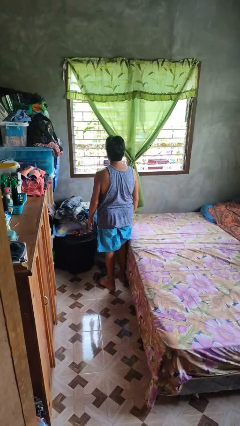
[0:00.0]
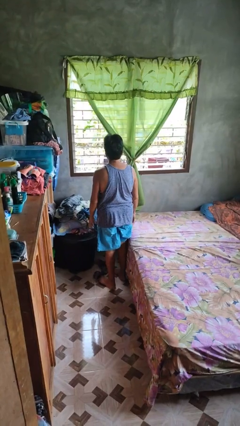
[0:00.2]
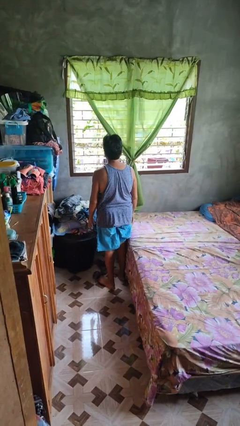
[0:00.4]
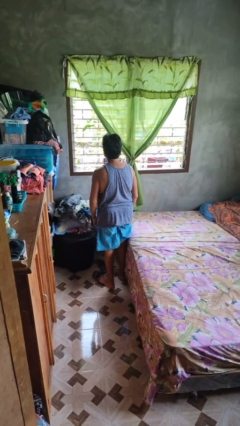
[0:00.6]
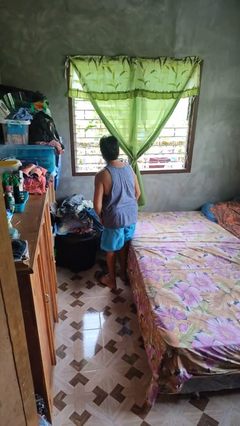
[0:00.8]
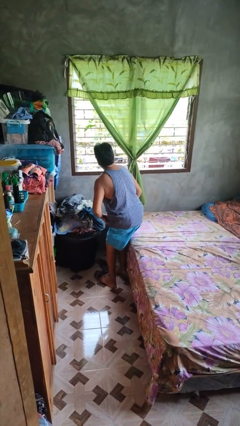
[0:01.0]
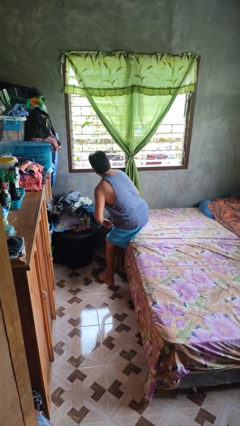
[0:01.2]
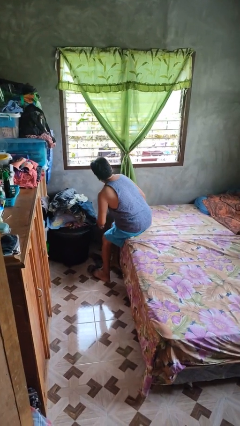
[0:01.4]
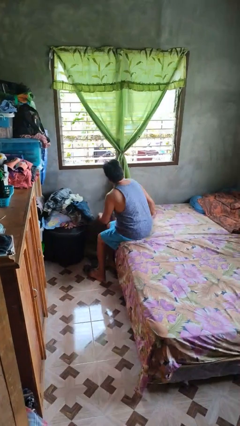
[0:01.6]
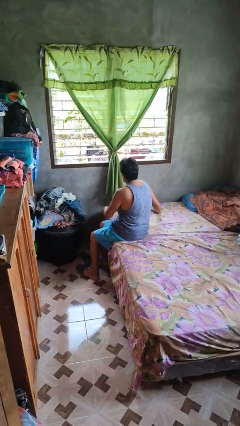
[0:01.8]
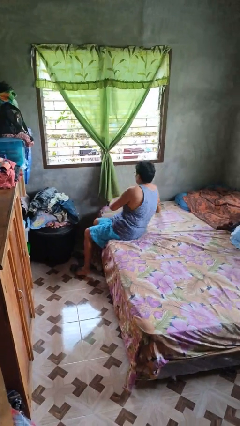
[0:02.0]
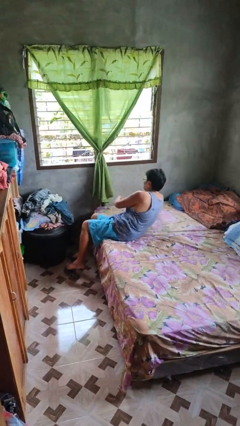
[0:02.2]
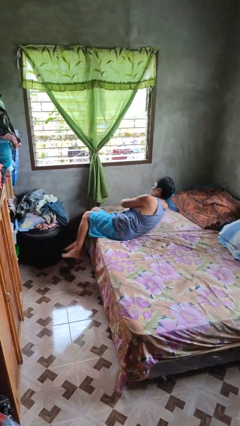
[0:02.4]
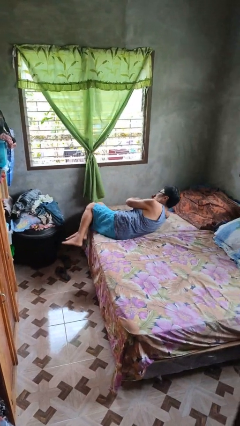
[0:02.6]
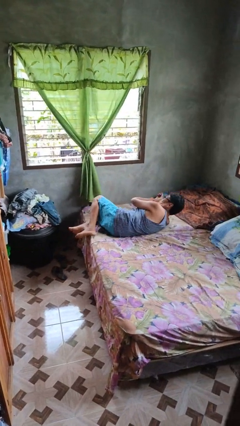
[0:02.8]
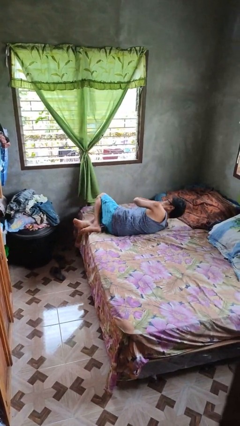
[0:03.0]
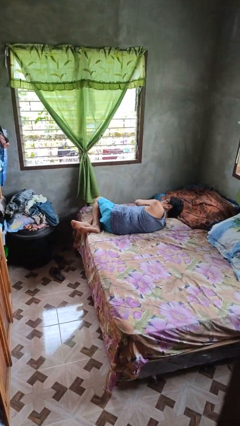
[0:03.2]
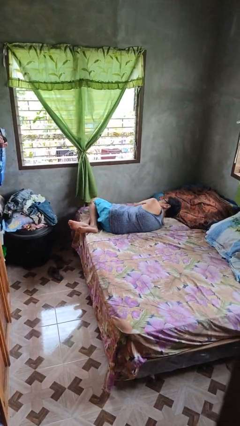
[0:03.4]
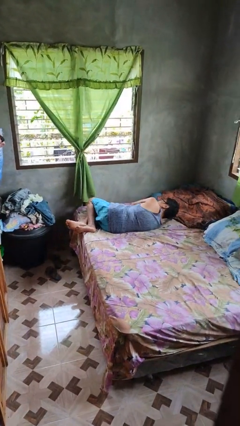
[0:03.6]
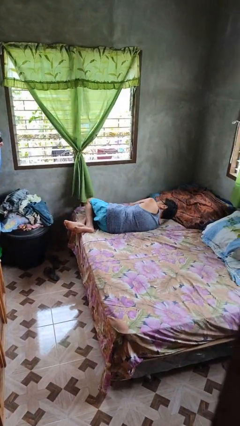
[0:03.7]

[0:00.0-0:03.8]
person lies down on bed

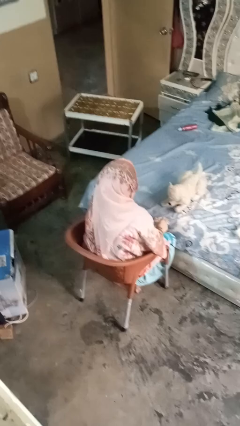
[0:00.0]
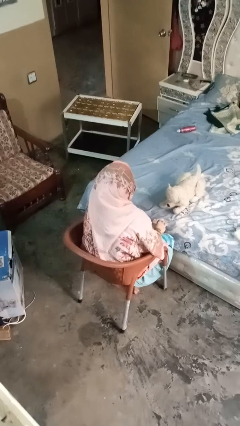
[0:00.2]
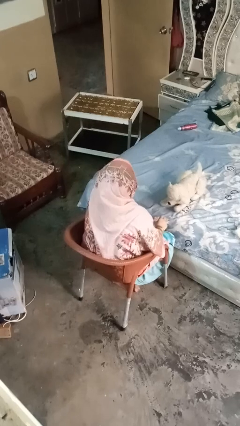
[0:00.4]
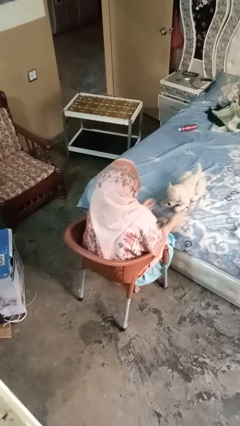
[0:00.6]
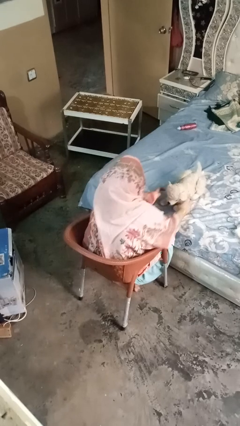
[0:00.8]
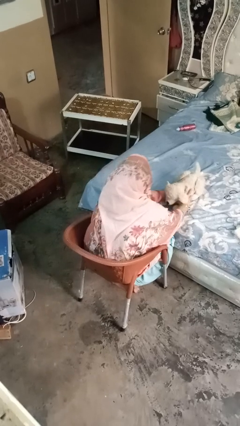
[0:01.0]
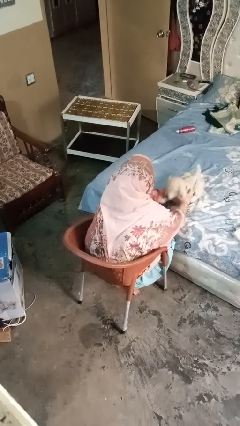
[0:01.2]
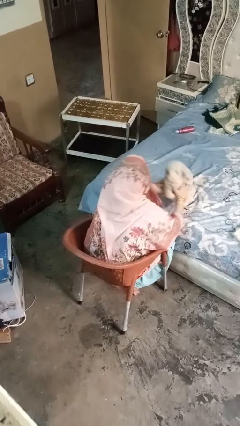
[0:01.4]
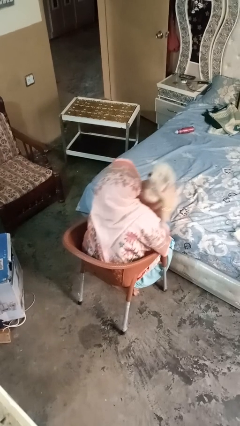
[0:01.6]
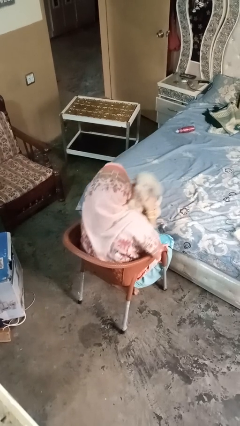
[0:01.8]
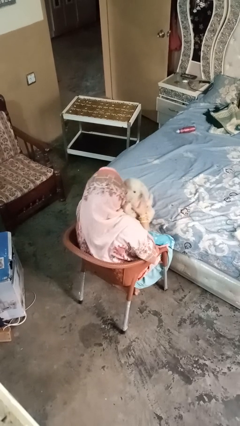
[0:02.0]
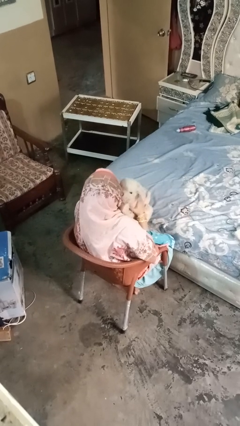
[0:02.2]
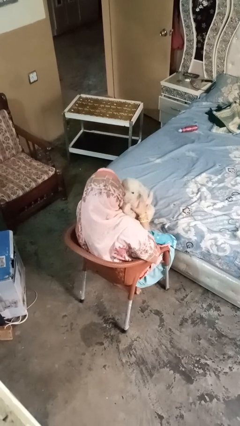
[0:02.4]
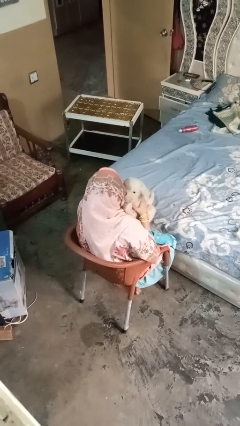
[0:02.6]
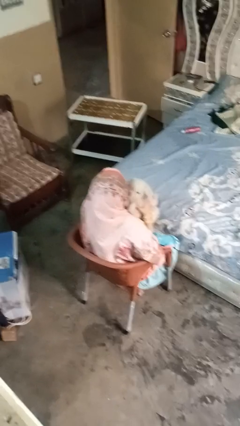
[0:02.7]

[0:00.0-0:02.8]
person hugs stuffed animal

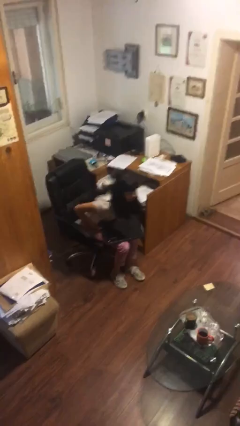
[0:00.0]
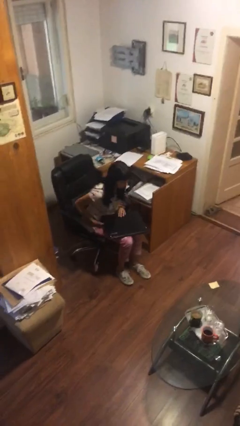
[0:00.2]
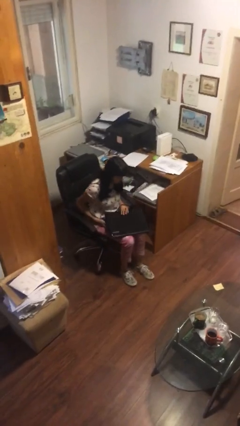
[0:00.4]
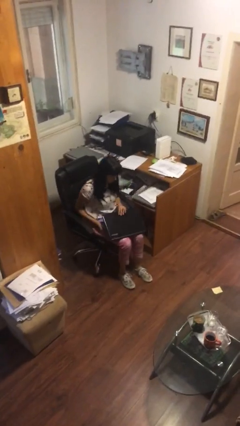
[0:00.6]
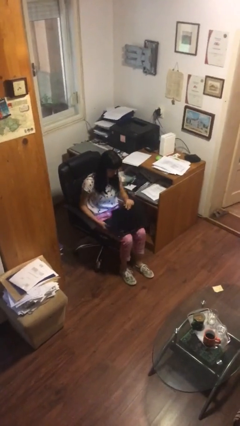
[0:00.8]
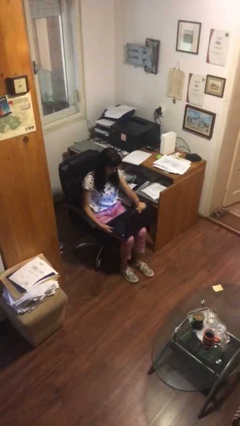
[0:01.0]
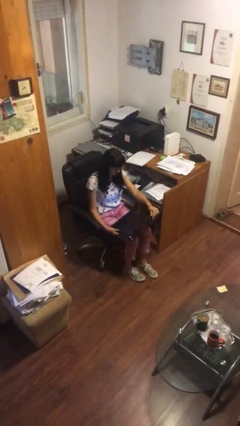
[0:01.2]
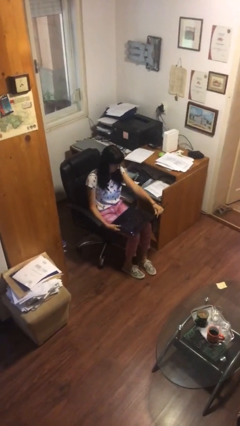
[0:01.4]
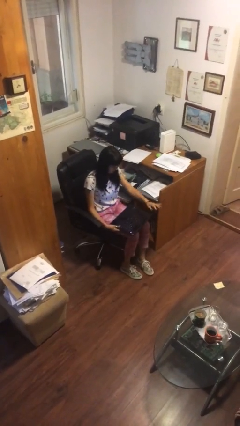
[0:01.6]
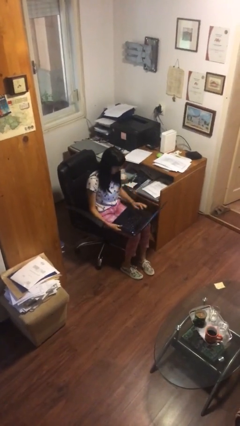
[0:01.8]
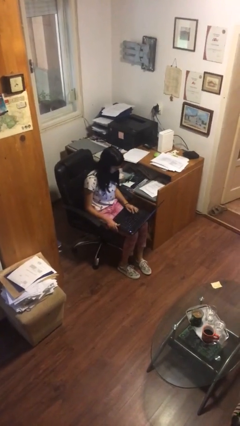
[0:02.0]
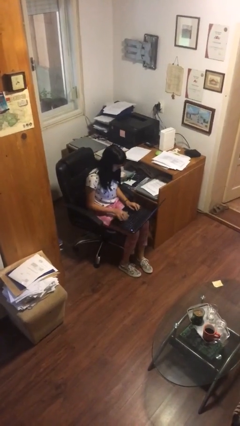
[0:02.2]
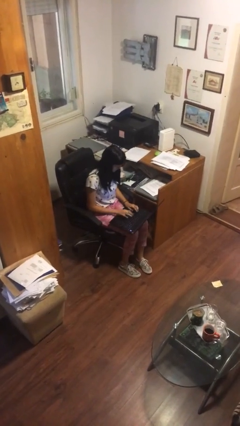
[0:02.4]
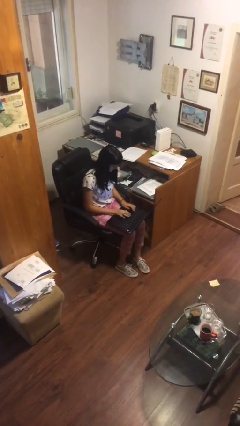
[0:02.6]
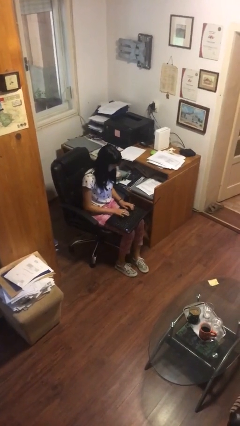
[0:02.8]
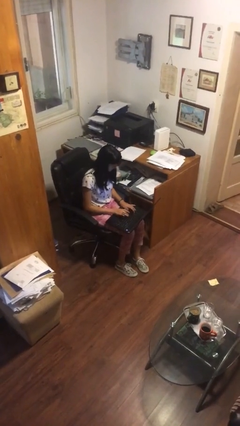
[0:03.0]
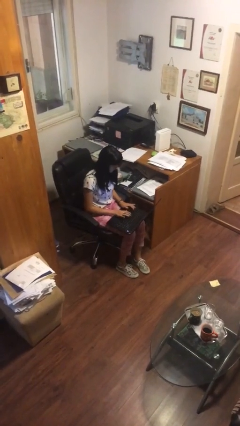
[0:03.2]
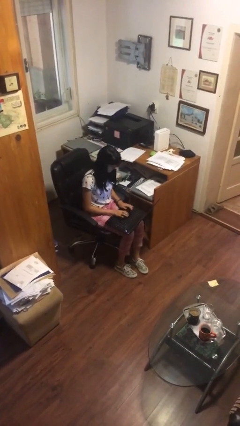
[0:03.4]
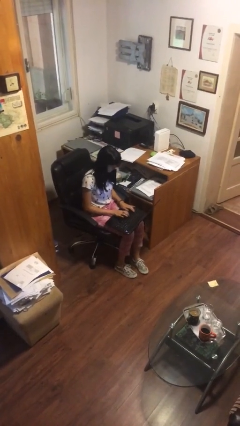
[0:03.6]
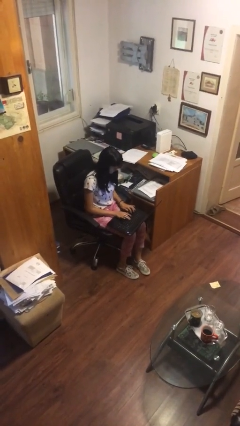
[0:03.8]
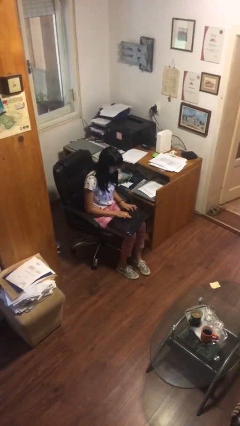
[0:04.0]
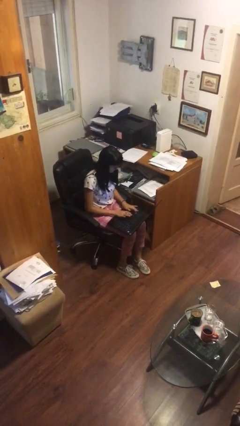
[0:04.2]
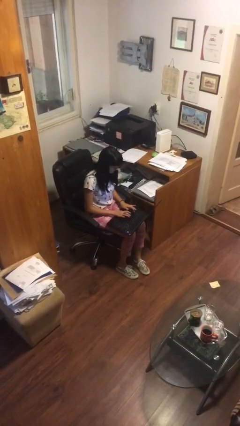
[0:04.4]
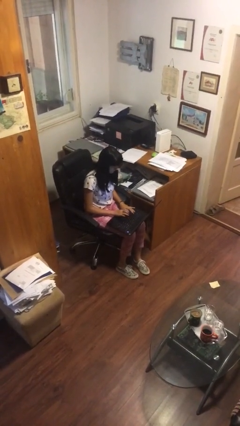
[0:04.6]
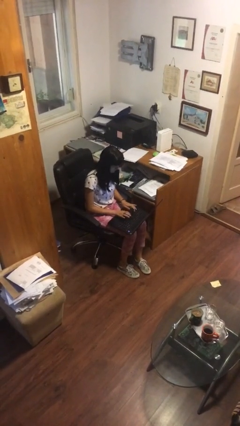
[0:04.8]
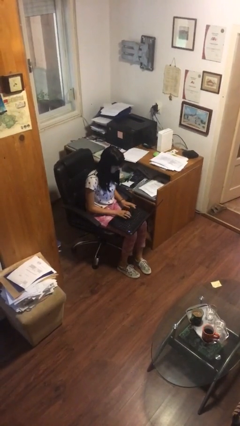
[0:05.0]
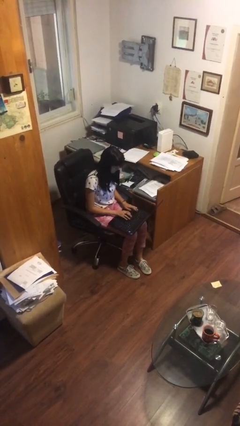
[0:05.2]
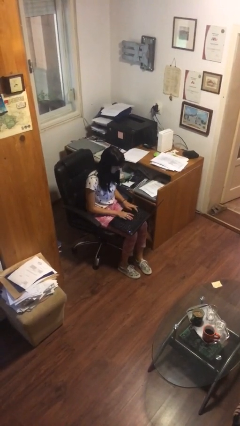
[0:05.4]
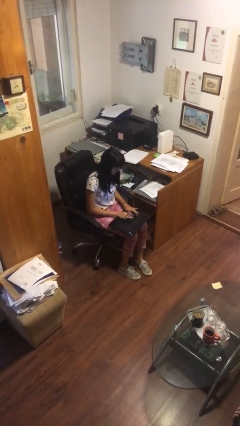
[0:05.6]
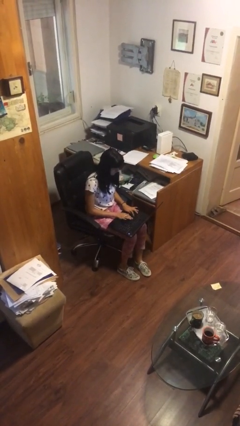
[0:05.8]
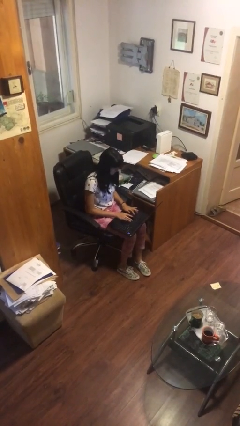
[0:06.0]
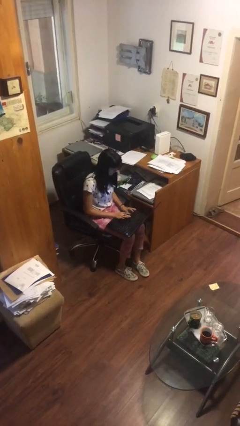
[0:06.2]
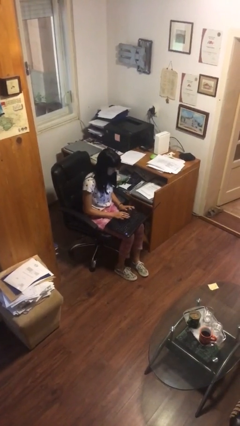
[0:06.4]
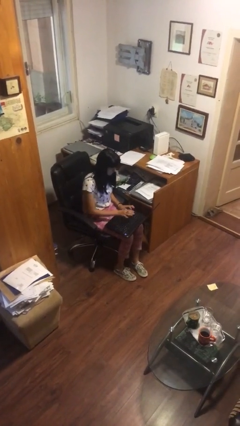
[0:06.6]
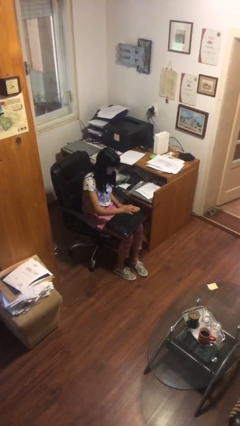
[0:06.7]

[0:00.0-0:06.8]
person interacts with laptop

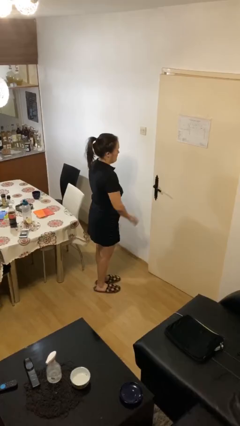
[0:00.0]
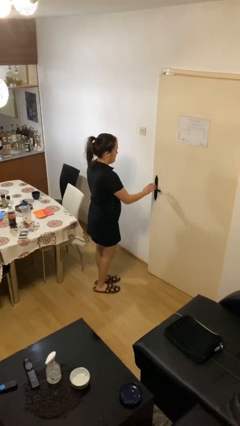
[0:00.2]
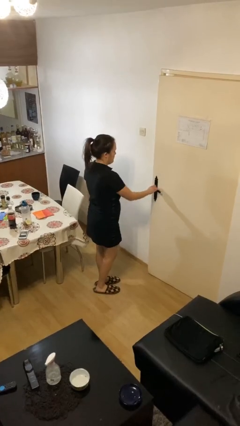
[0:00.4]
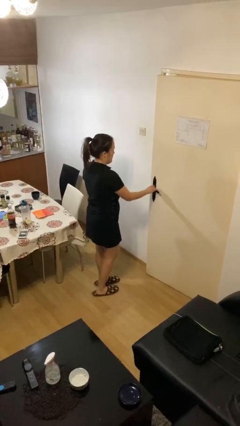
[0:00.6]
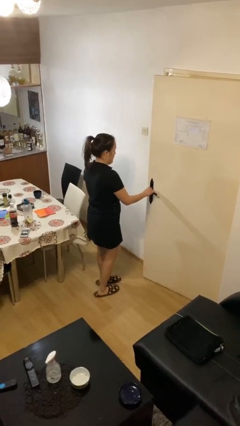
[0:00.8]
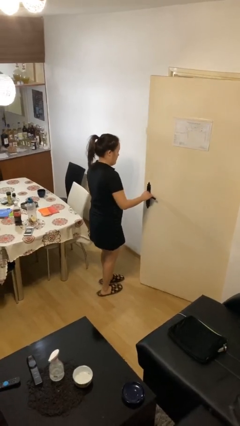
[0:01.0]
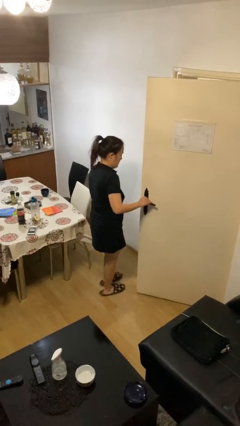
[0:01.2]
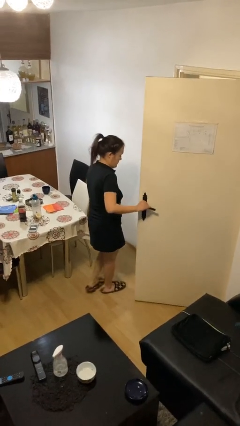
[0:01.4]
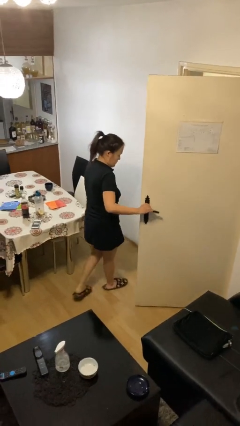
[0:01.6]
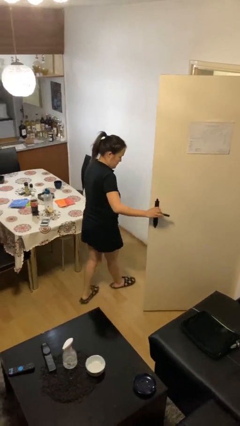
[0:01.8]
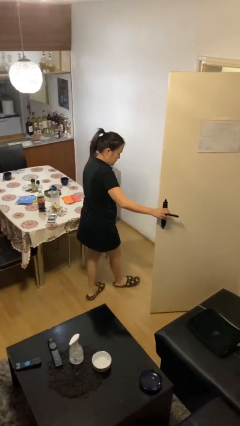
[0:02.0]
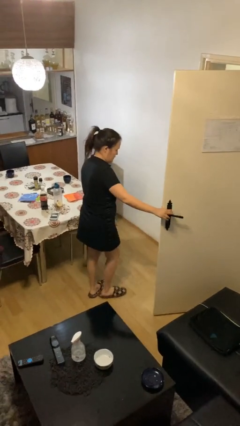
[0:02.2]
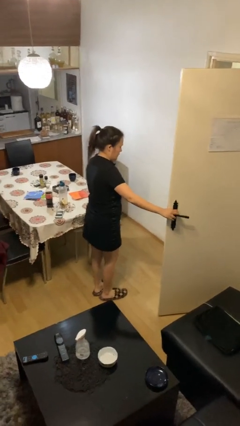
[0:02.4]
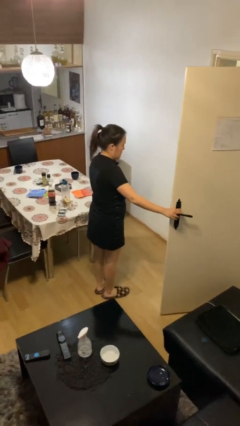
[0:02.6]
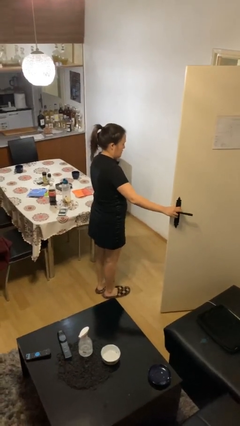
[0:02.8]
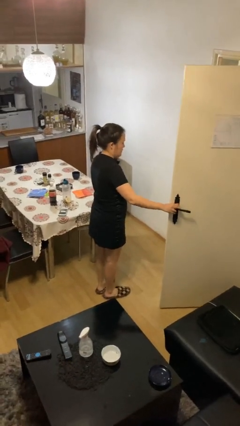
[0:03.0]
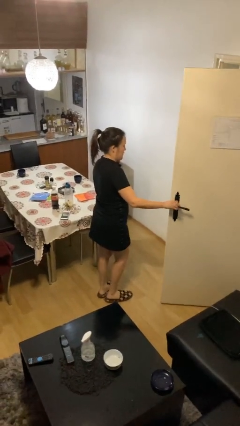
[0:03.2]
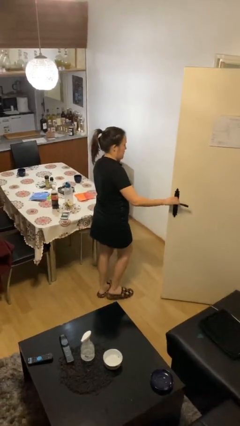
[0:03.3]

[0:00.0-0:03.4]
person opens facility door

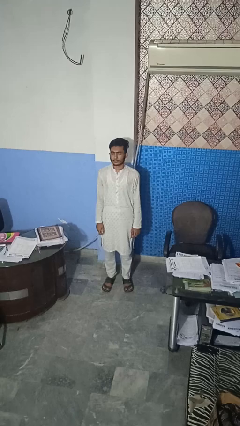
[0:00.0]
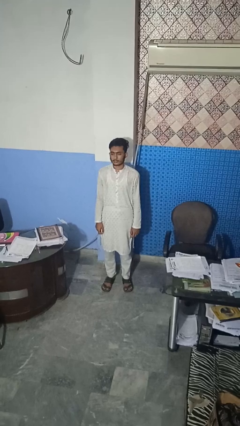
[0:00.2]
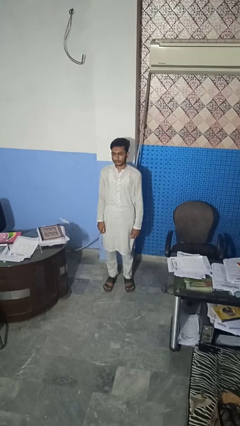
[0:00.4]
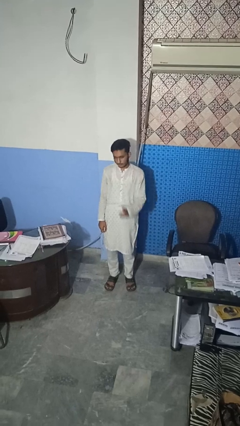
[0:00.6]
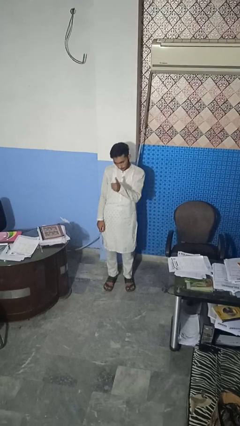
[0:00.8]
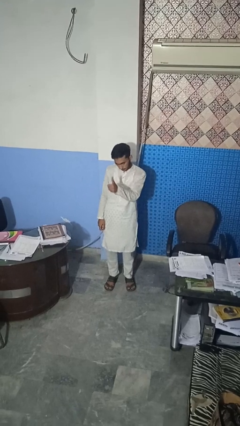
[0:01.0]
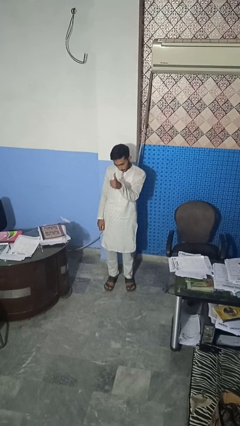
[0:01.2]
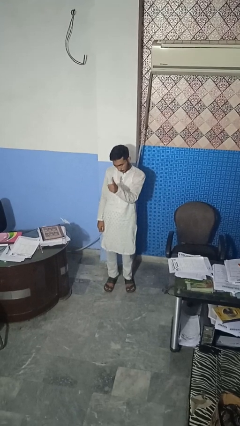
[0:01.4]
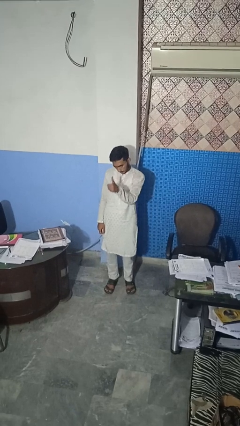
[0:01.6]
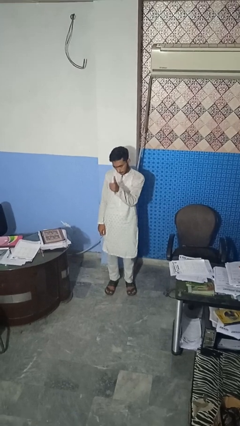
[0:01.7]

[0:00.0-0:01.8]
person gestures thumbs up
